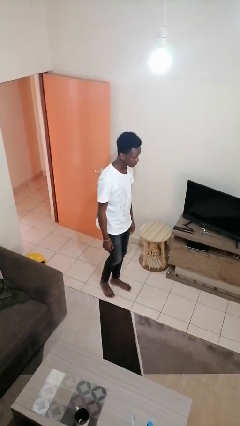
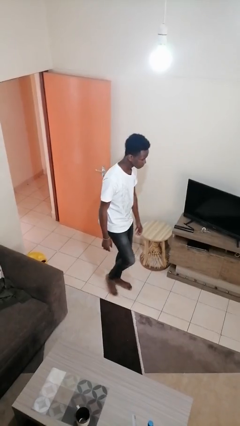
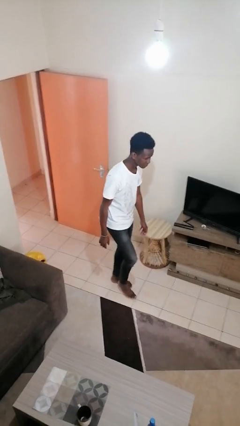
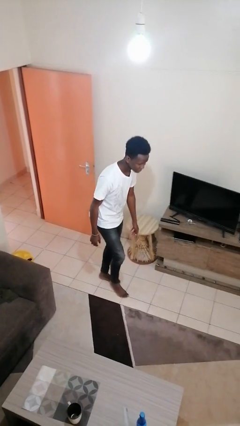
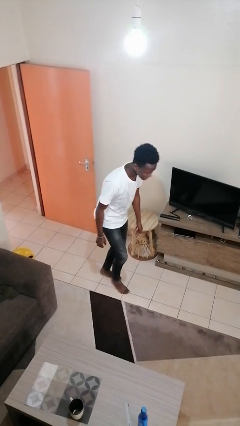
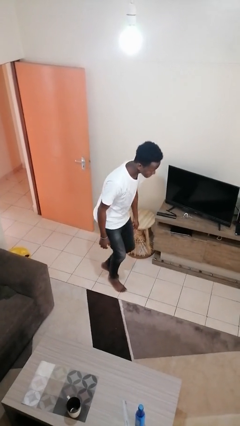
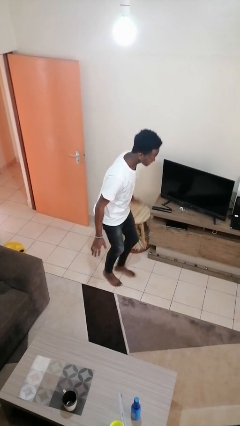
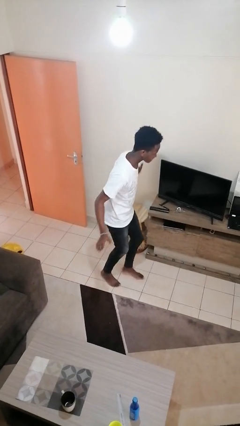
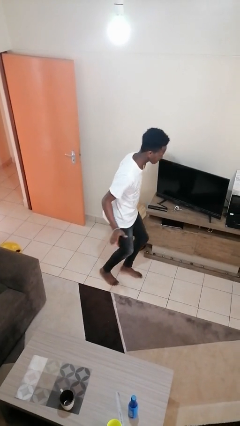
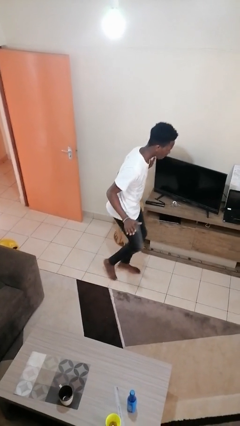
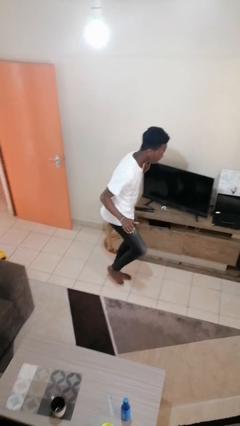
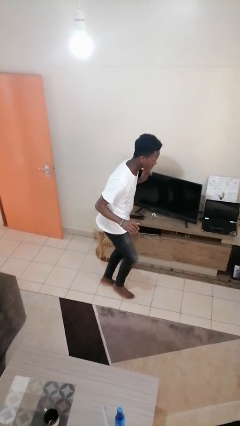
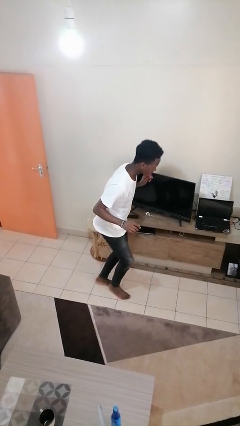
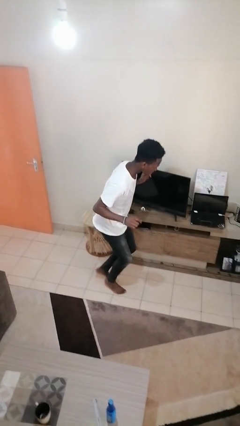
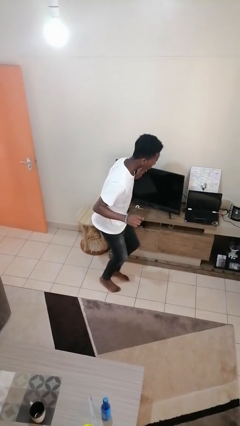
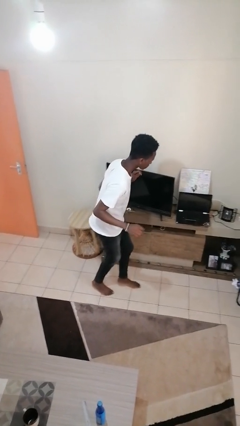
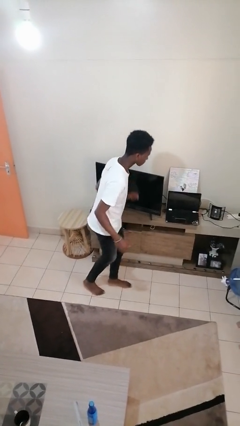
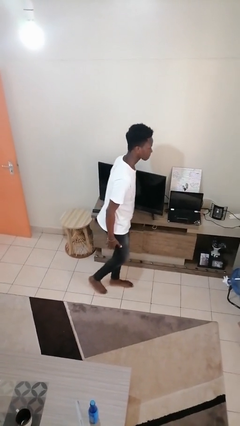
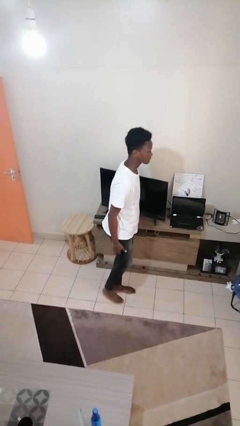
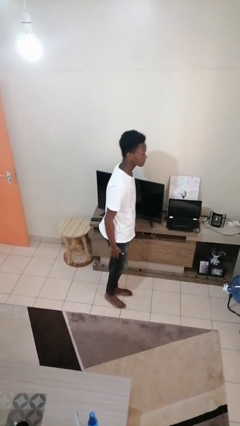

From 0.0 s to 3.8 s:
person walks tiptoe

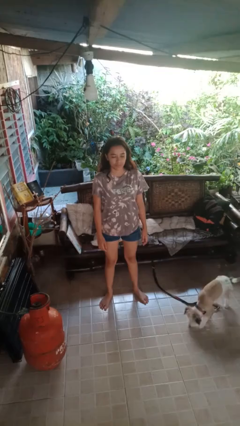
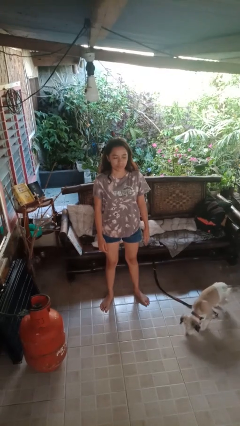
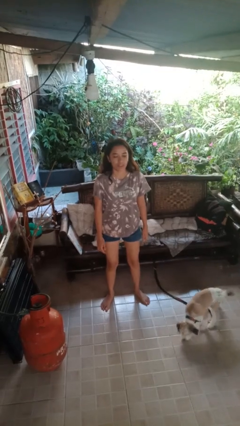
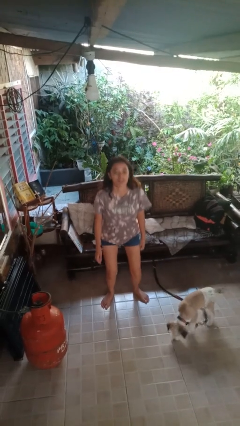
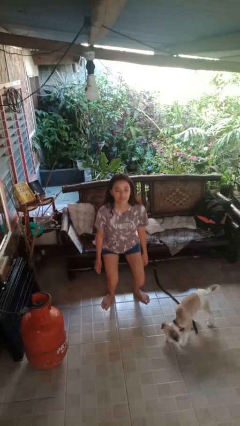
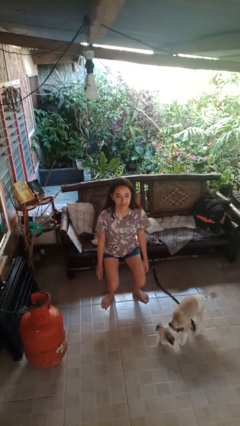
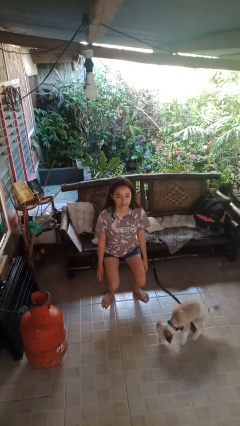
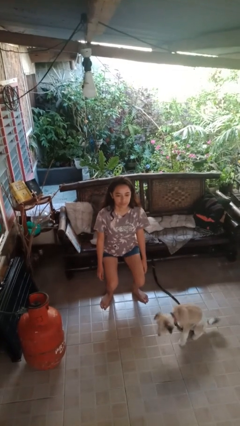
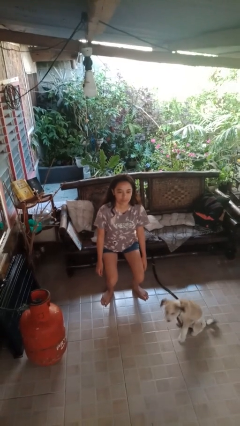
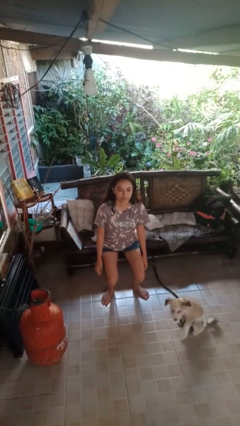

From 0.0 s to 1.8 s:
person squats

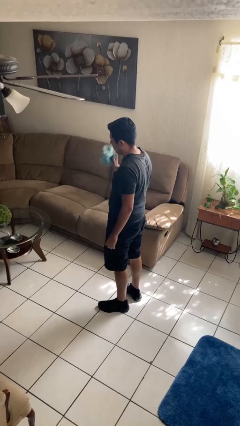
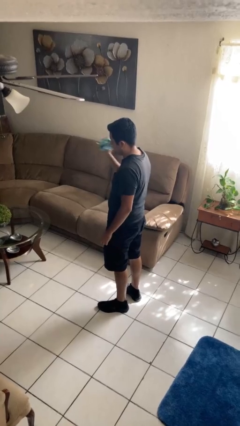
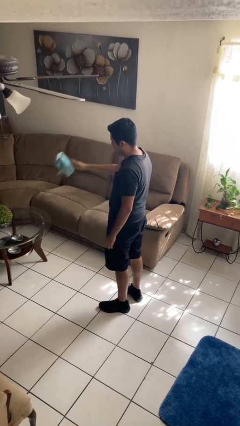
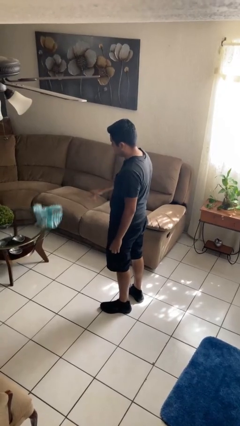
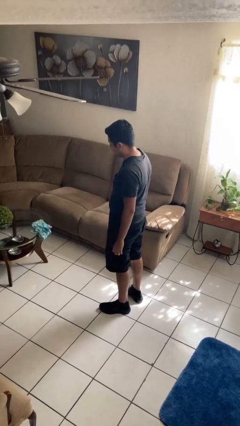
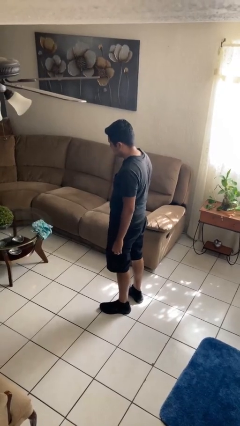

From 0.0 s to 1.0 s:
person throws object on table

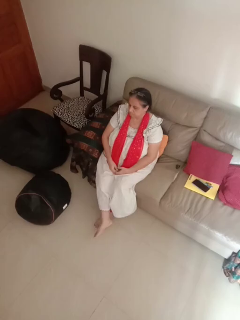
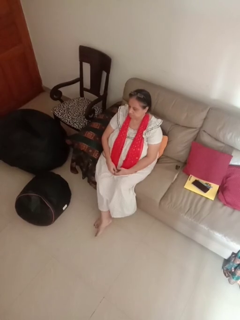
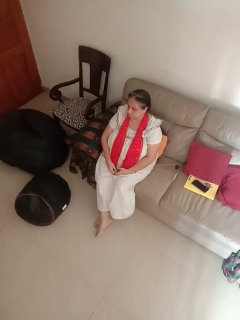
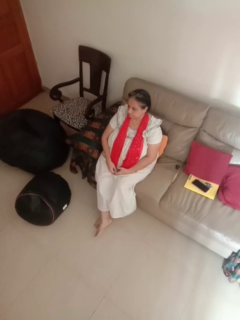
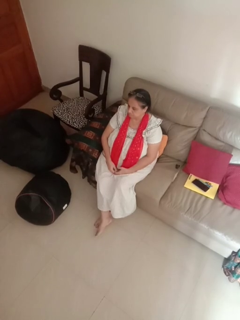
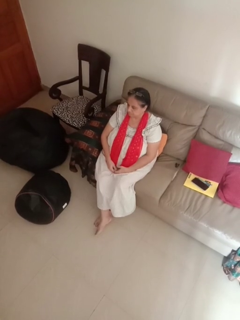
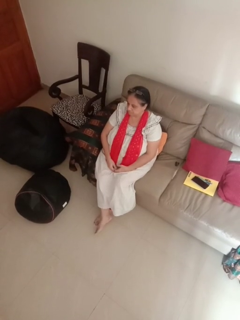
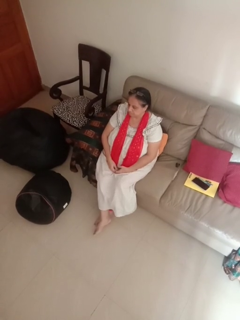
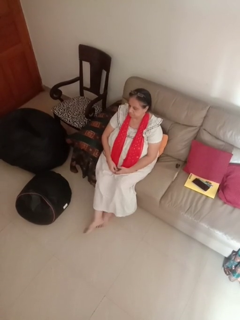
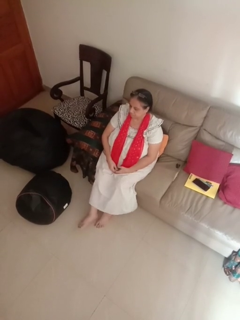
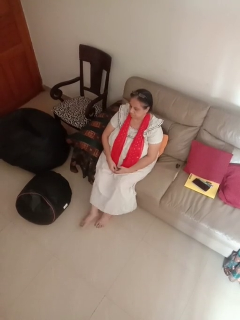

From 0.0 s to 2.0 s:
person crosses legs

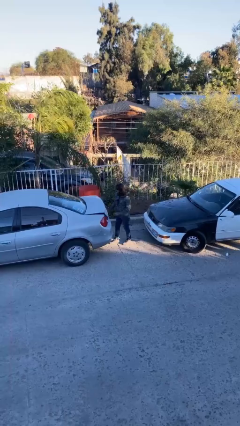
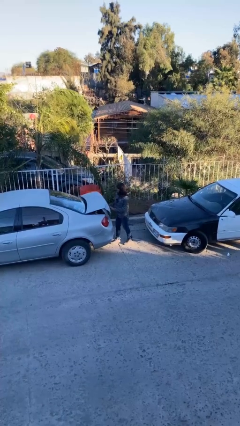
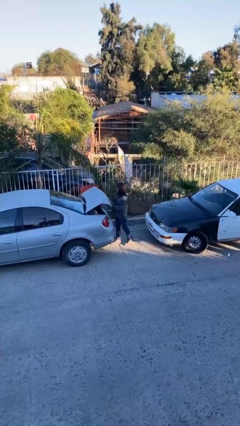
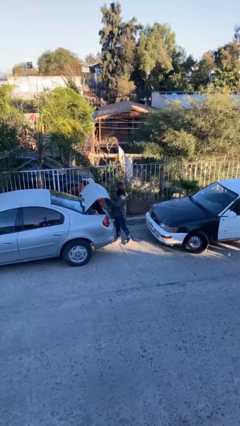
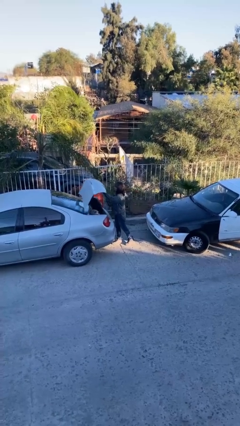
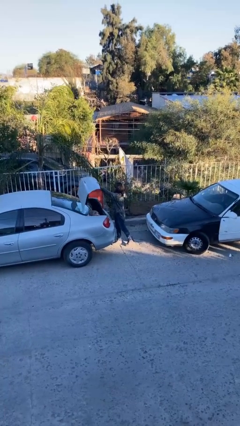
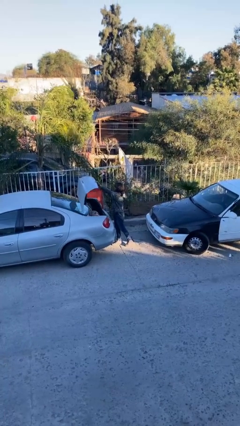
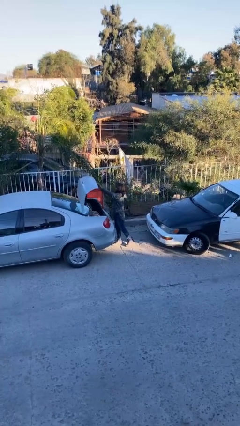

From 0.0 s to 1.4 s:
person opens car trunk

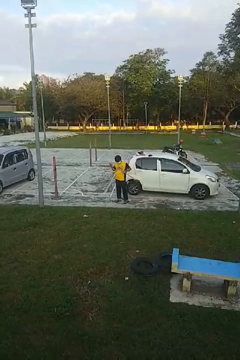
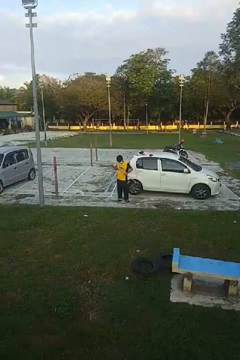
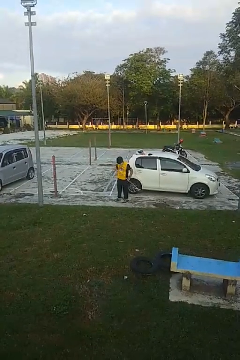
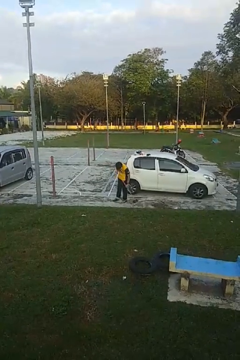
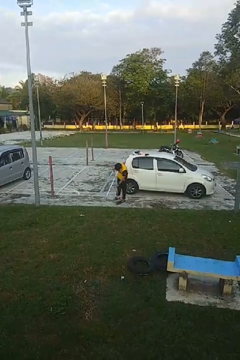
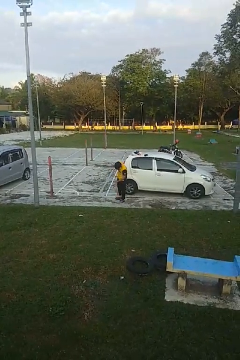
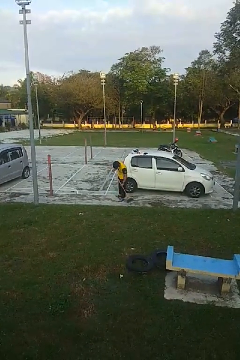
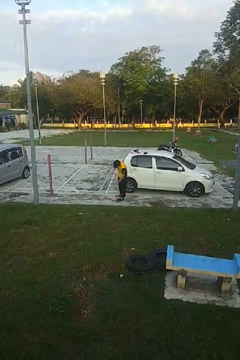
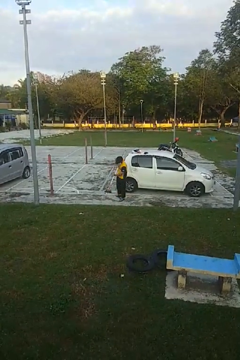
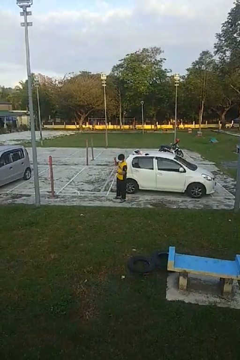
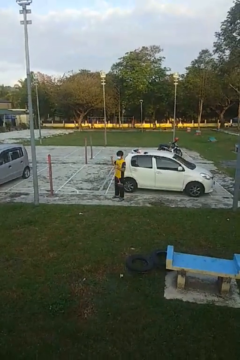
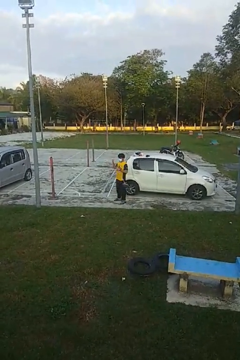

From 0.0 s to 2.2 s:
person sweeps floor

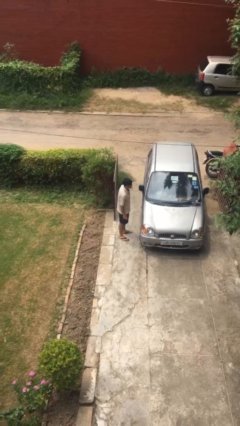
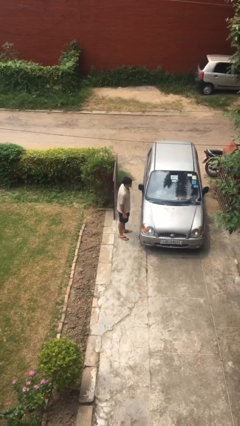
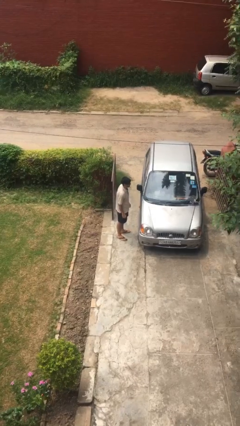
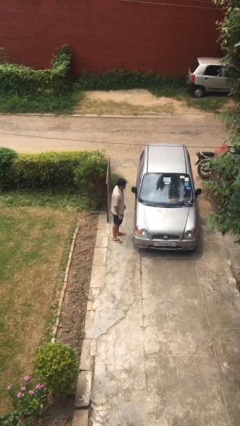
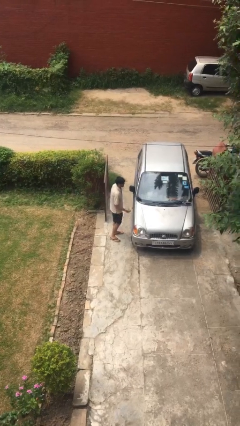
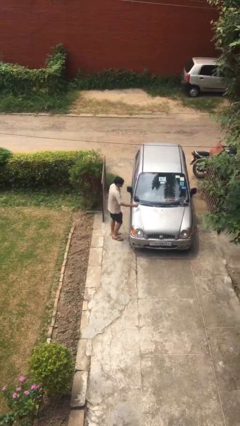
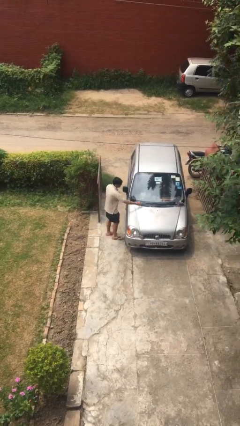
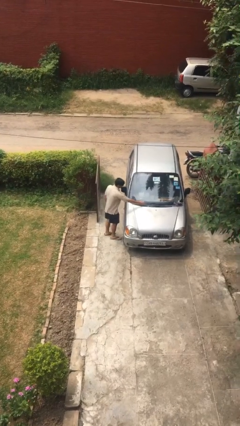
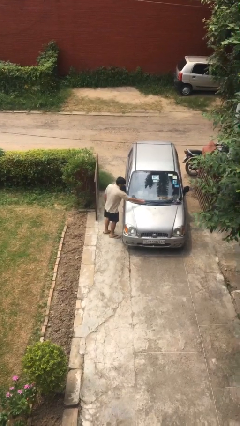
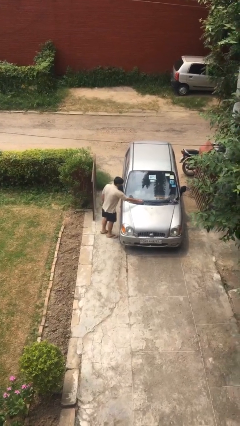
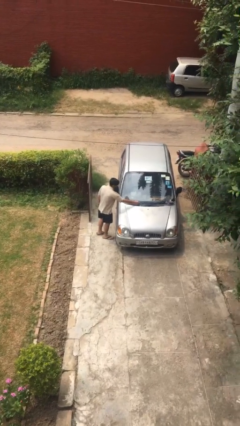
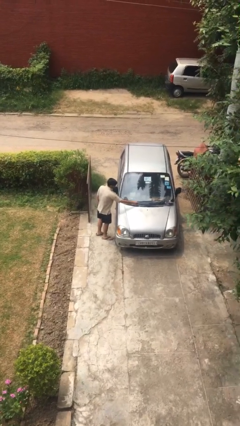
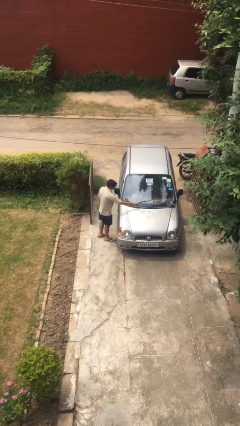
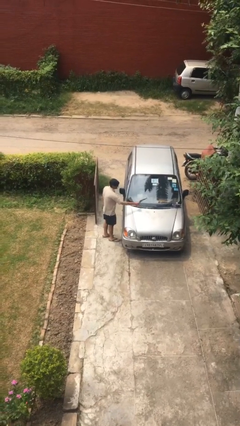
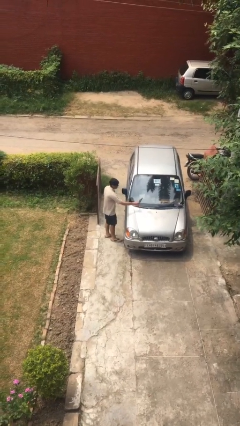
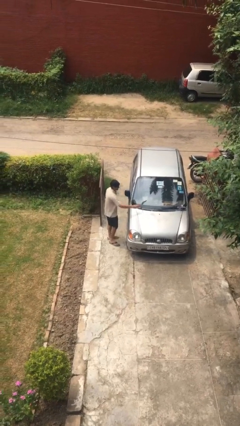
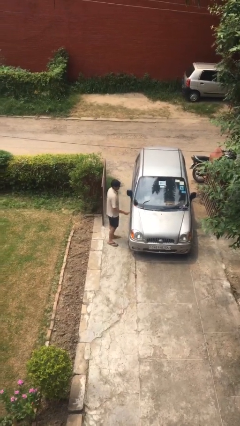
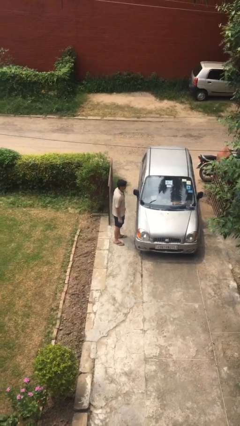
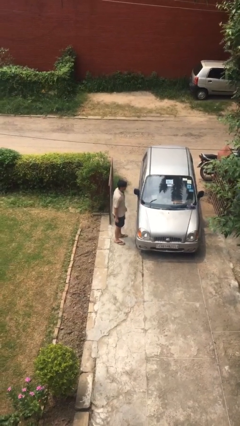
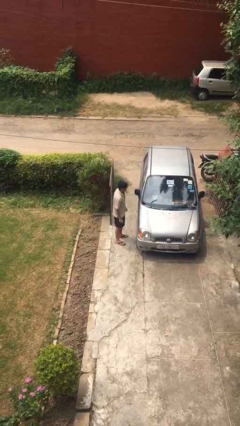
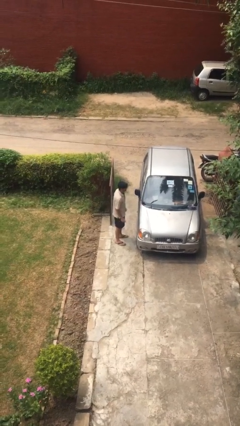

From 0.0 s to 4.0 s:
person flips up car wipers

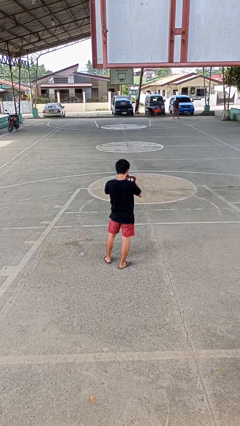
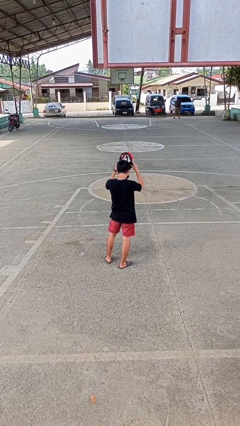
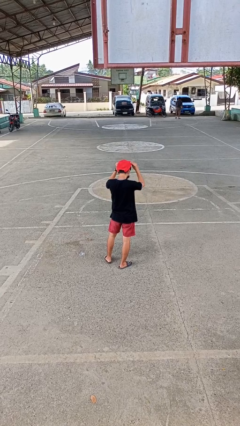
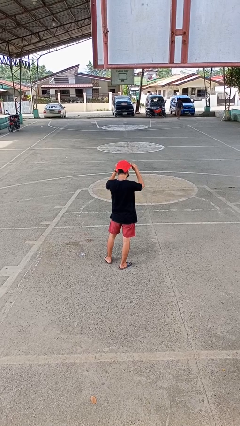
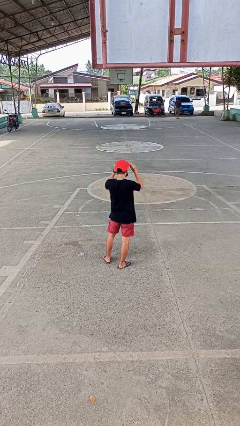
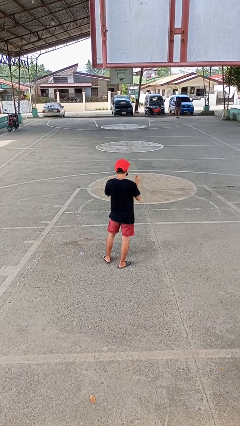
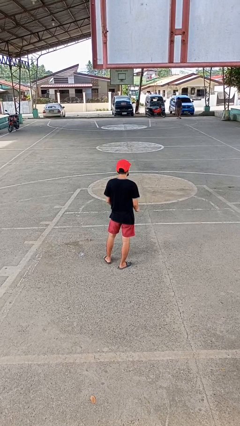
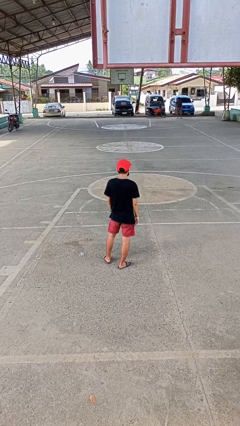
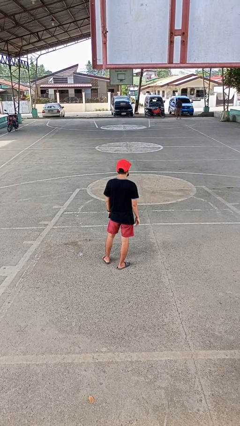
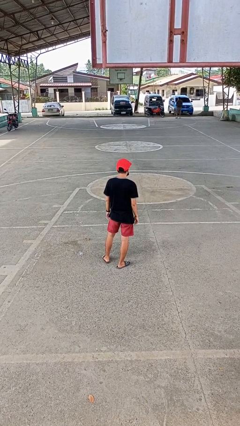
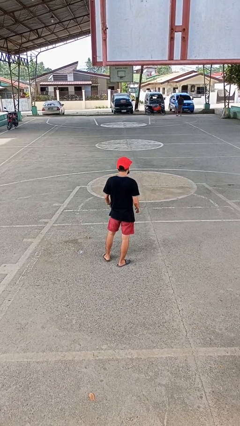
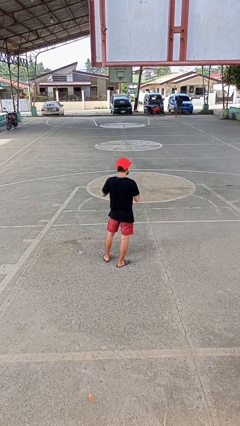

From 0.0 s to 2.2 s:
person puts on hat
